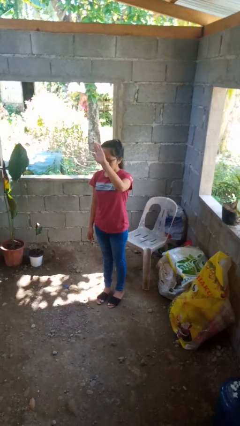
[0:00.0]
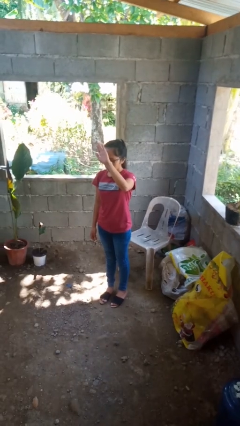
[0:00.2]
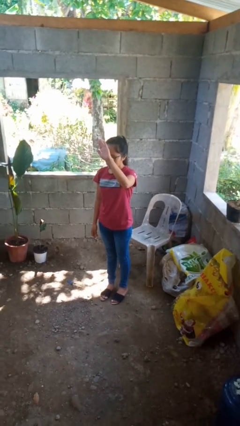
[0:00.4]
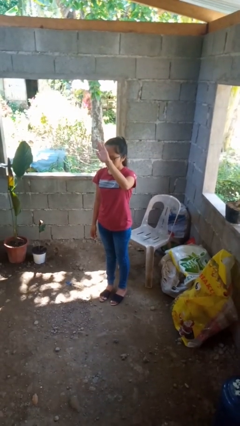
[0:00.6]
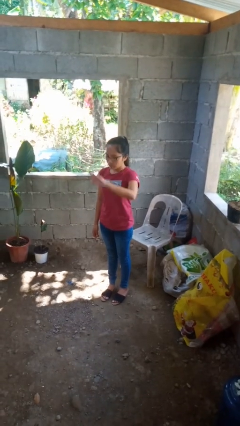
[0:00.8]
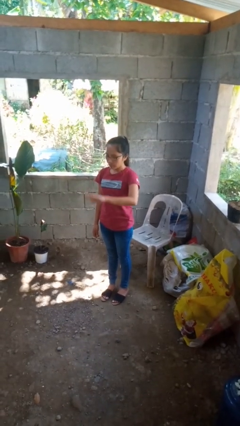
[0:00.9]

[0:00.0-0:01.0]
person gestures swipe down

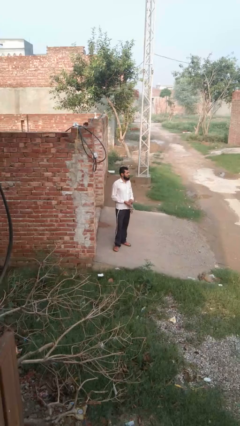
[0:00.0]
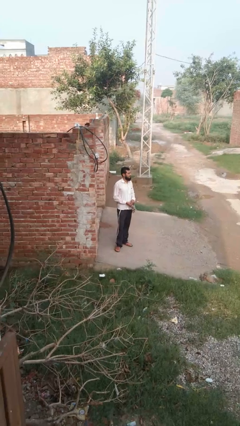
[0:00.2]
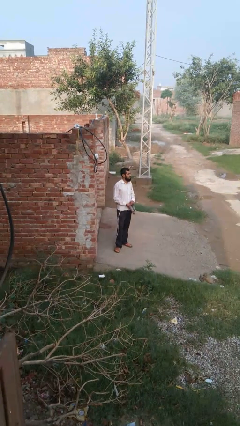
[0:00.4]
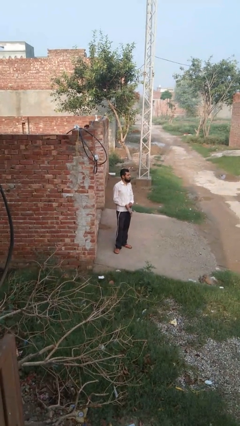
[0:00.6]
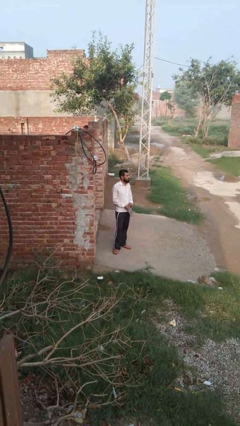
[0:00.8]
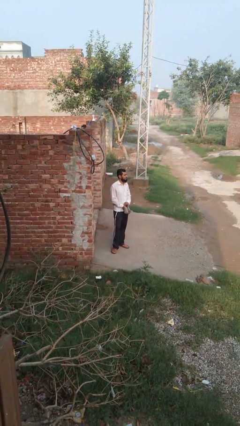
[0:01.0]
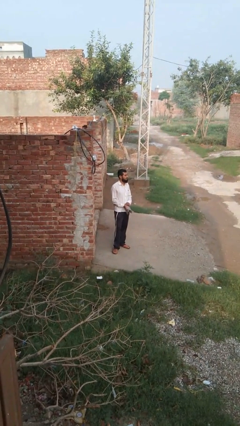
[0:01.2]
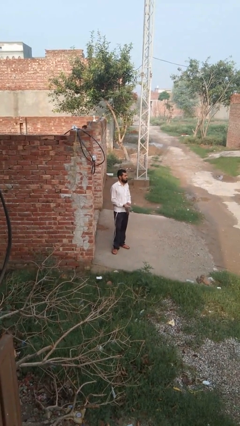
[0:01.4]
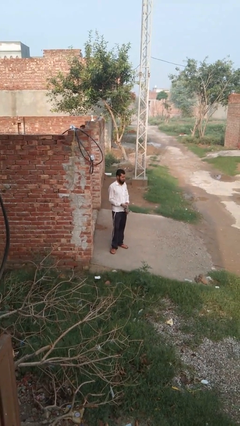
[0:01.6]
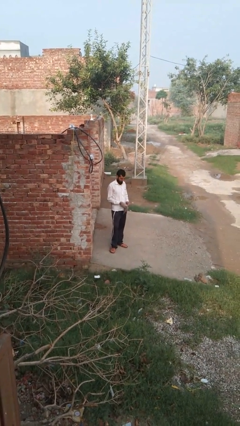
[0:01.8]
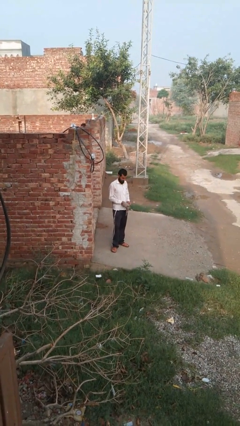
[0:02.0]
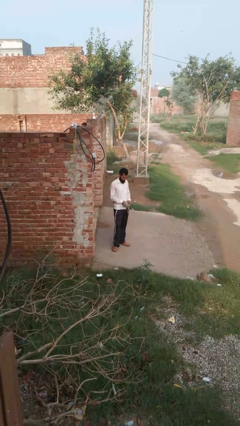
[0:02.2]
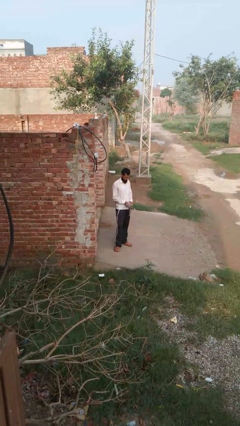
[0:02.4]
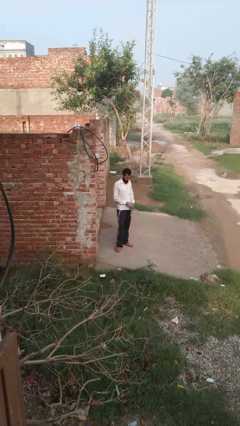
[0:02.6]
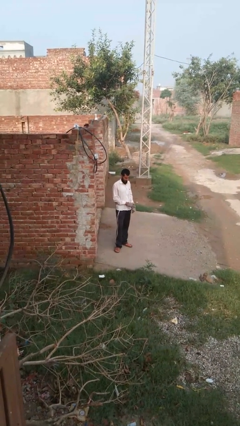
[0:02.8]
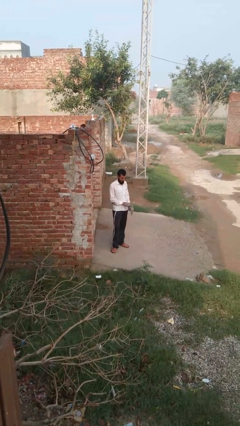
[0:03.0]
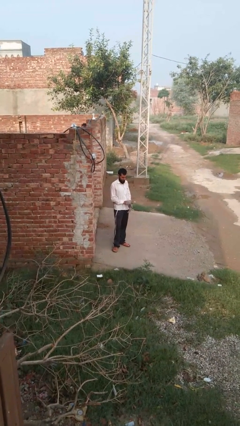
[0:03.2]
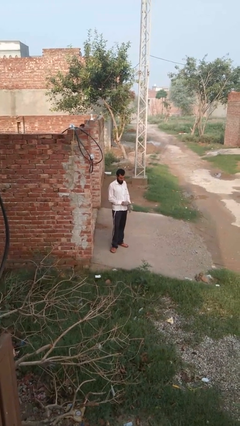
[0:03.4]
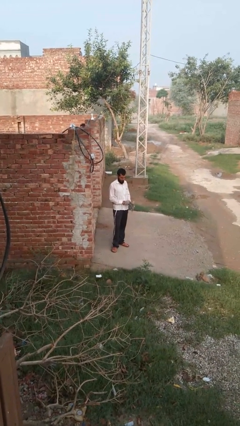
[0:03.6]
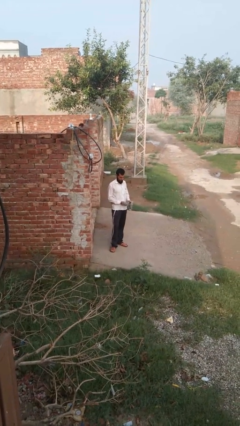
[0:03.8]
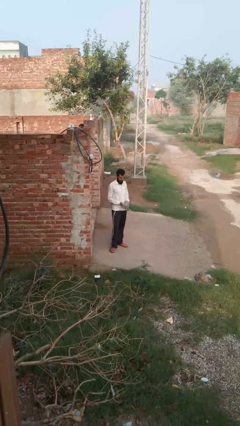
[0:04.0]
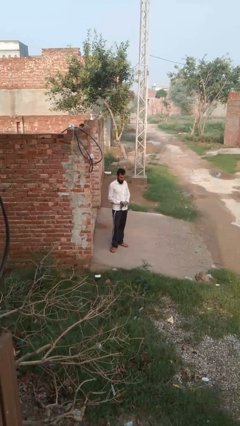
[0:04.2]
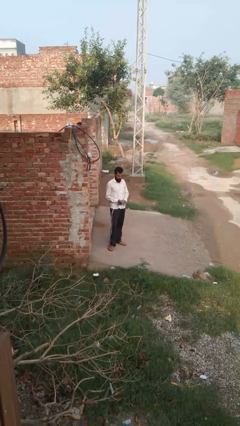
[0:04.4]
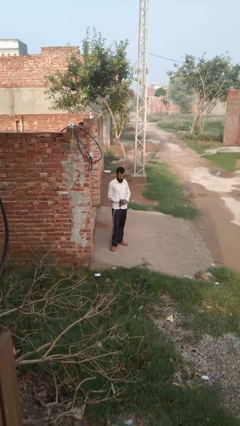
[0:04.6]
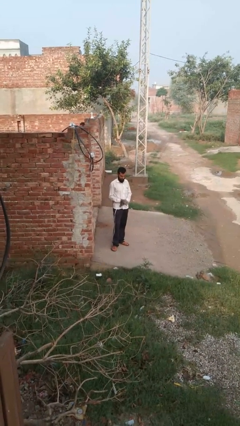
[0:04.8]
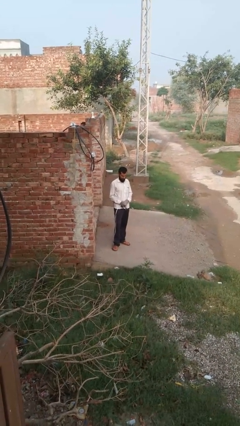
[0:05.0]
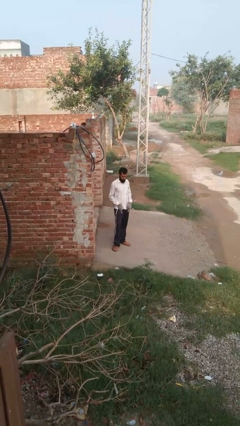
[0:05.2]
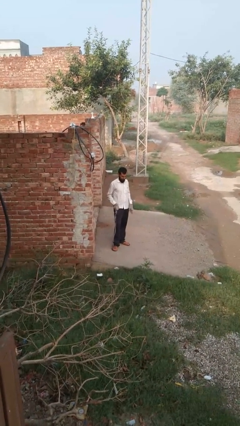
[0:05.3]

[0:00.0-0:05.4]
person puts on gloves

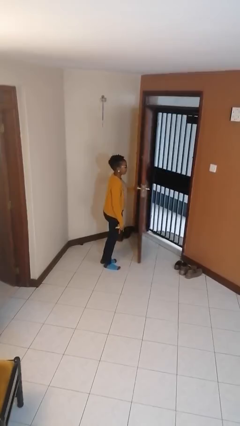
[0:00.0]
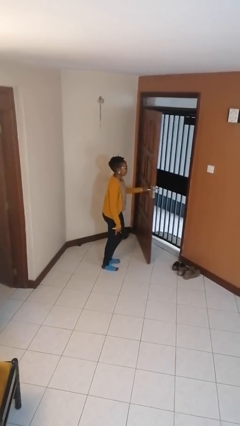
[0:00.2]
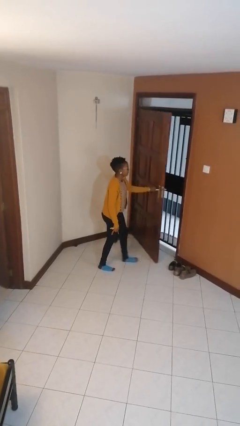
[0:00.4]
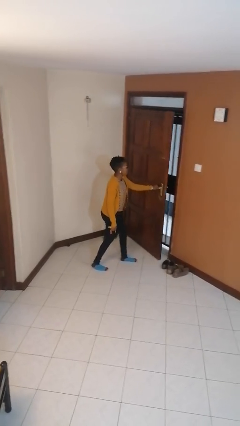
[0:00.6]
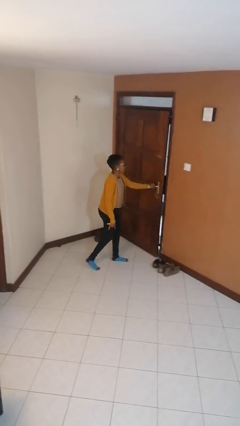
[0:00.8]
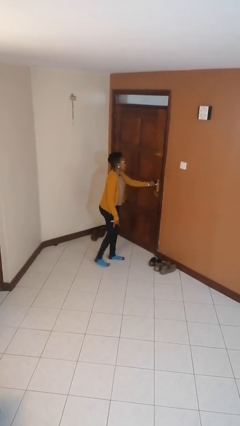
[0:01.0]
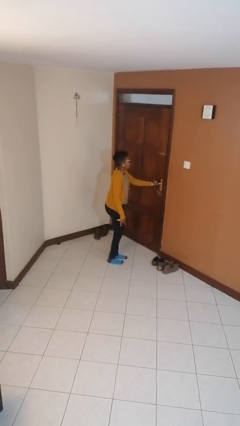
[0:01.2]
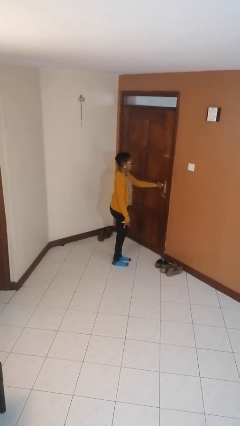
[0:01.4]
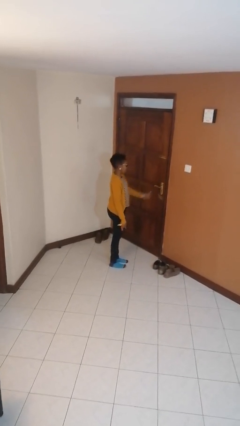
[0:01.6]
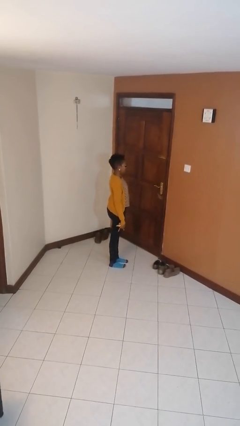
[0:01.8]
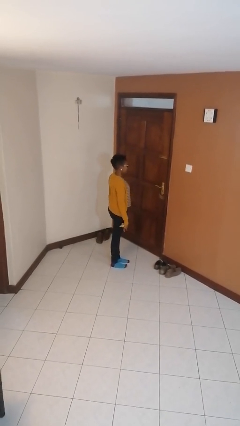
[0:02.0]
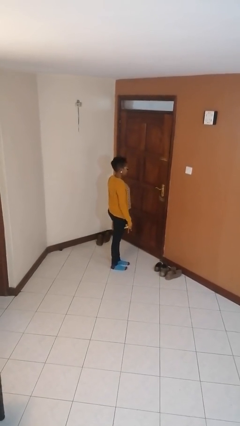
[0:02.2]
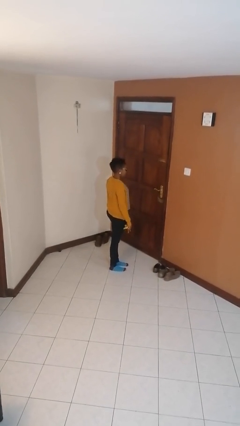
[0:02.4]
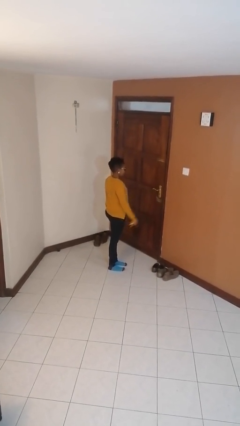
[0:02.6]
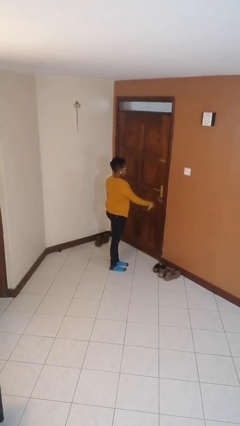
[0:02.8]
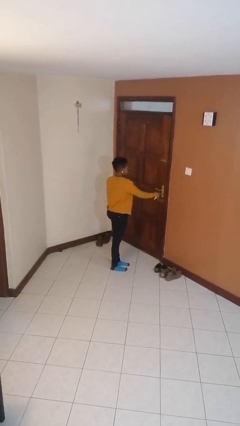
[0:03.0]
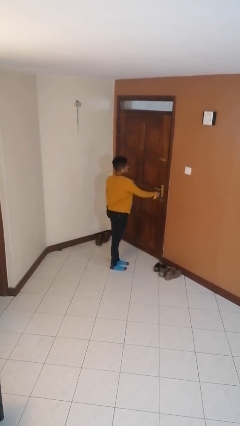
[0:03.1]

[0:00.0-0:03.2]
person closes facility door

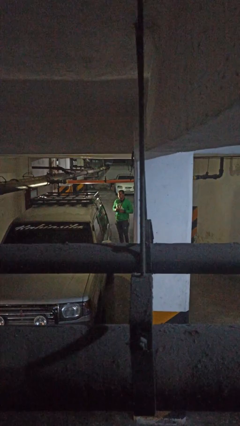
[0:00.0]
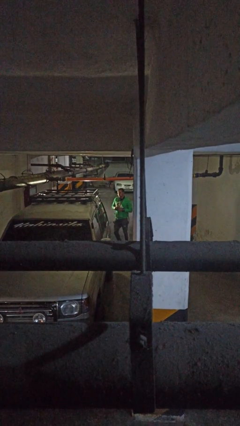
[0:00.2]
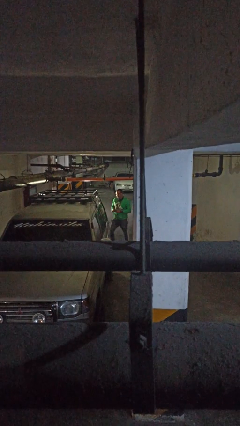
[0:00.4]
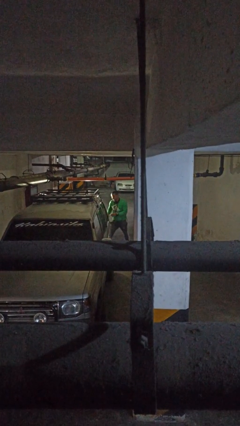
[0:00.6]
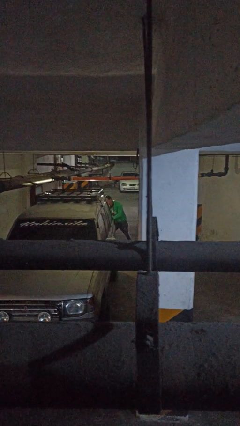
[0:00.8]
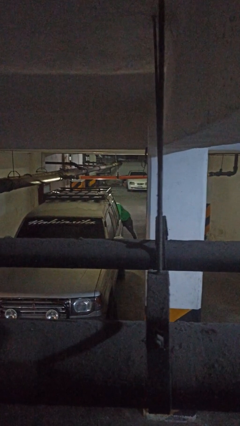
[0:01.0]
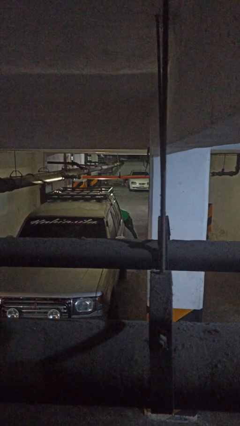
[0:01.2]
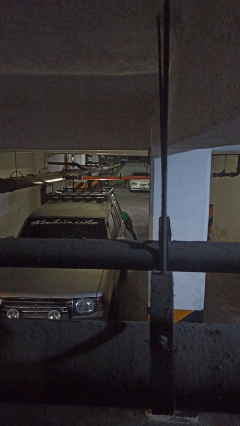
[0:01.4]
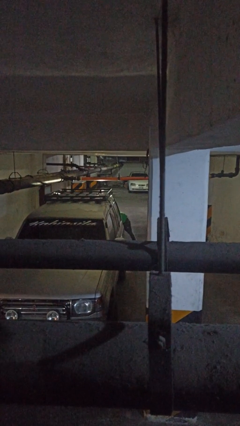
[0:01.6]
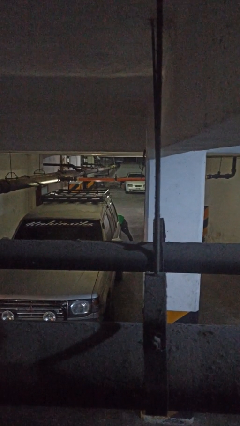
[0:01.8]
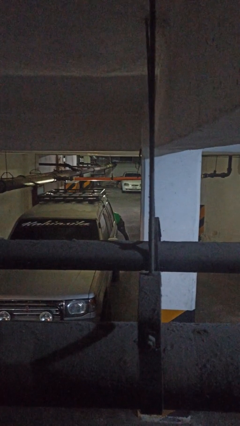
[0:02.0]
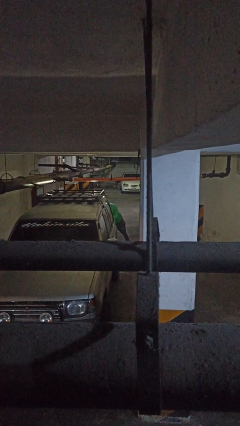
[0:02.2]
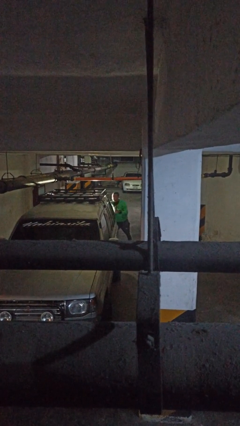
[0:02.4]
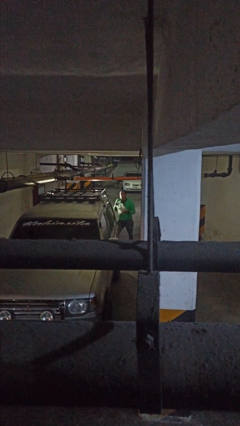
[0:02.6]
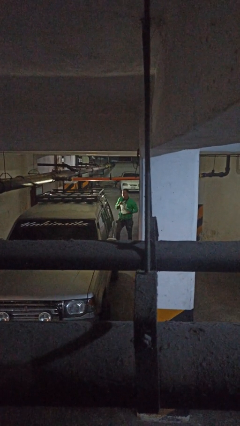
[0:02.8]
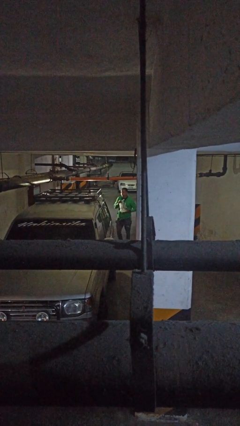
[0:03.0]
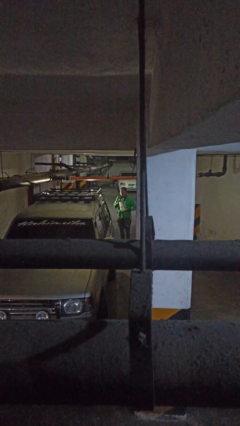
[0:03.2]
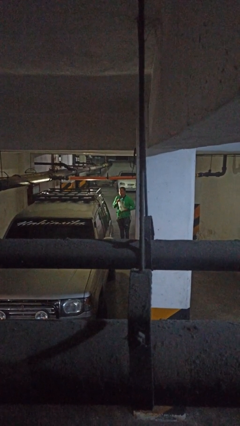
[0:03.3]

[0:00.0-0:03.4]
person unloads car

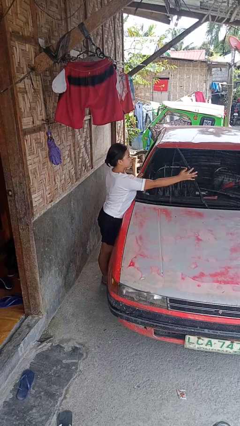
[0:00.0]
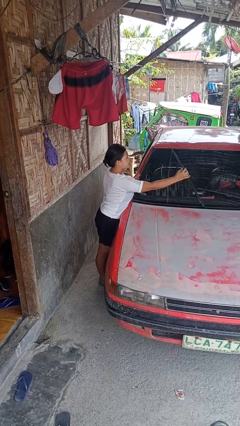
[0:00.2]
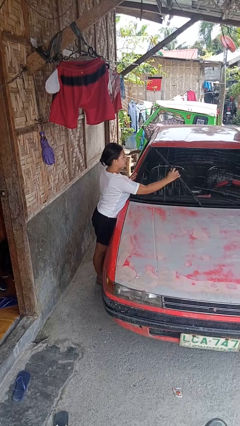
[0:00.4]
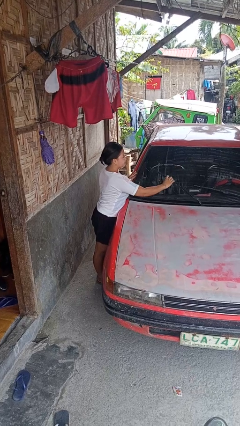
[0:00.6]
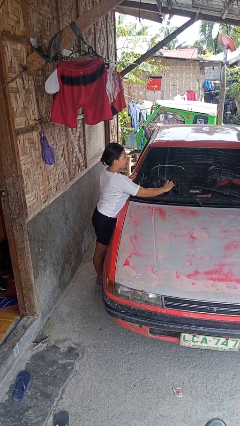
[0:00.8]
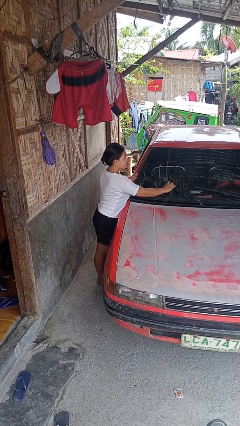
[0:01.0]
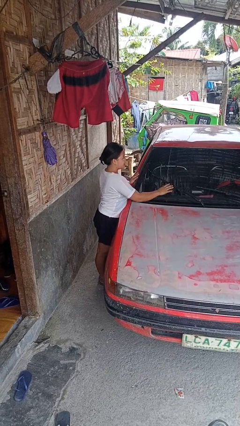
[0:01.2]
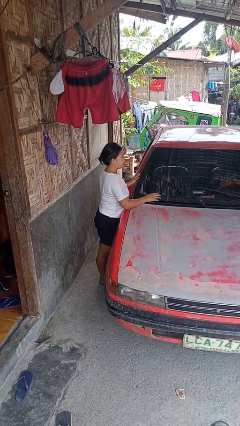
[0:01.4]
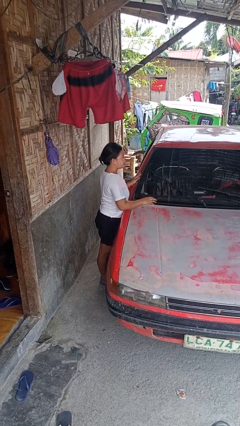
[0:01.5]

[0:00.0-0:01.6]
person flips down car wipers

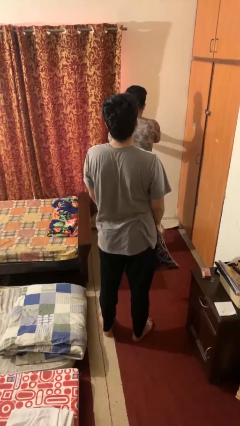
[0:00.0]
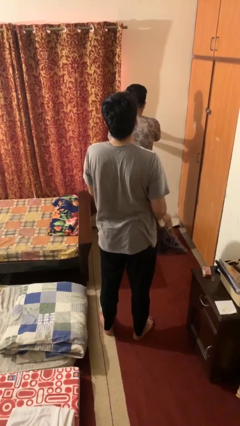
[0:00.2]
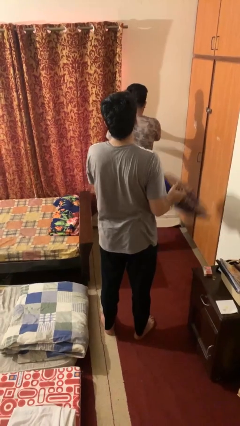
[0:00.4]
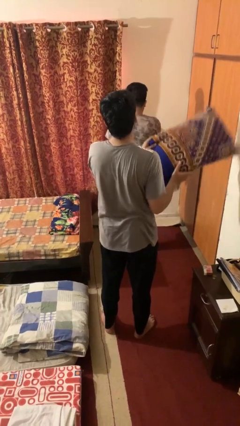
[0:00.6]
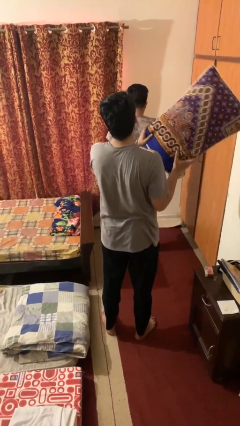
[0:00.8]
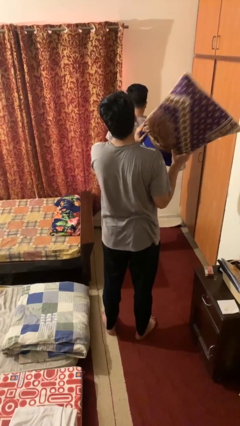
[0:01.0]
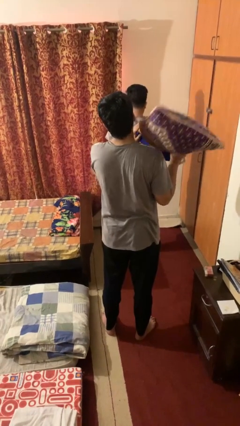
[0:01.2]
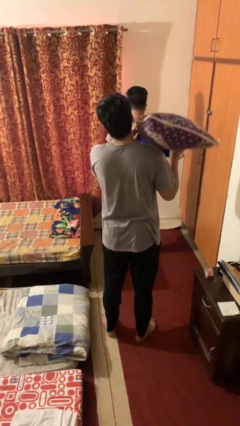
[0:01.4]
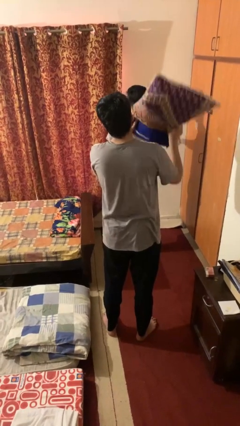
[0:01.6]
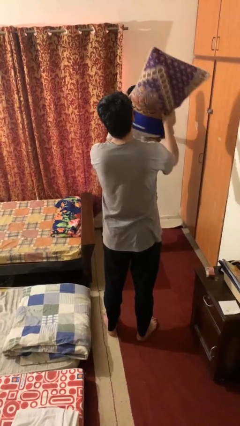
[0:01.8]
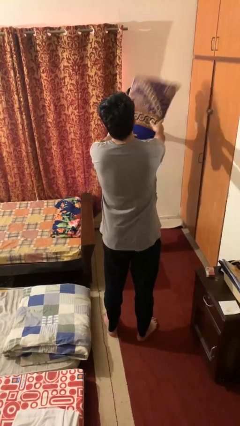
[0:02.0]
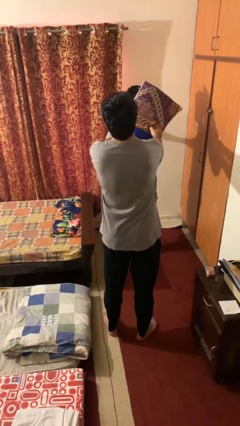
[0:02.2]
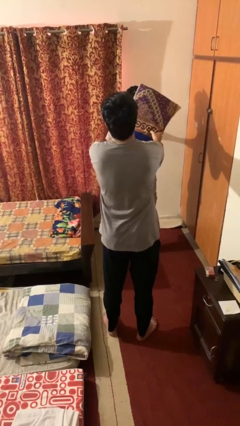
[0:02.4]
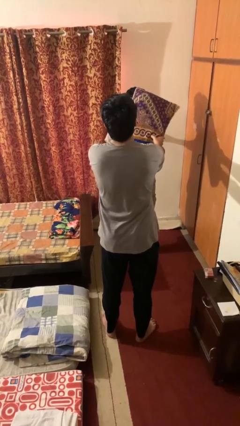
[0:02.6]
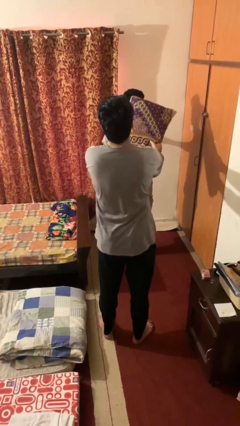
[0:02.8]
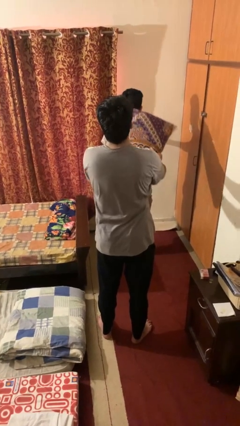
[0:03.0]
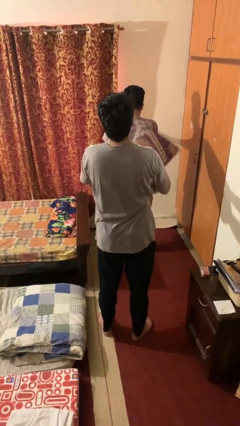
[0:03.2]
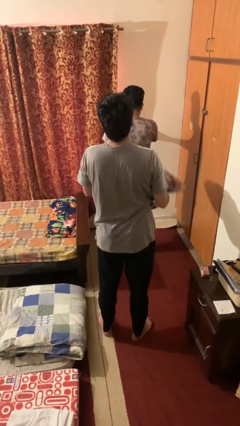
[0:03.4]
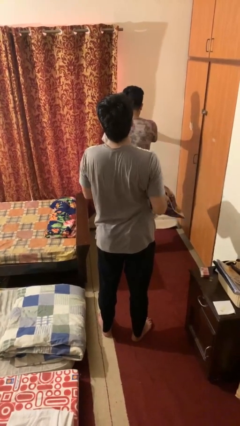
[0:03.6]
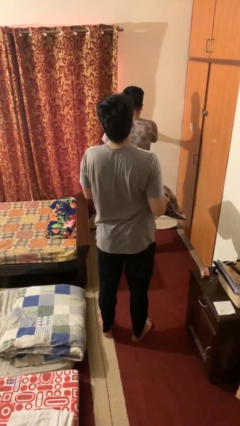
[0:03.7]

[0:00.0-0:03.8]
person hits person with pillow
